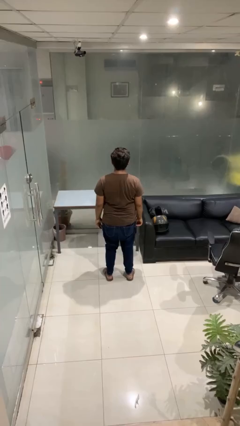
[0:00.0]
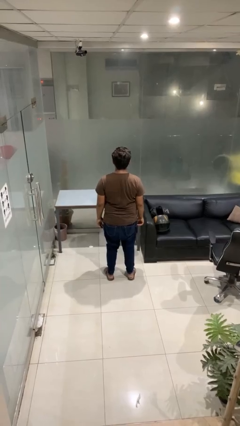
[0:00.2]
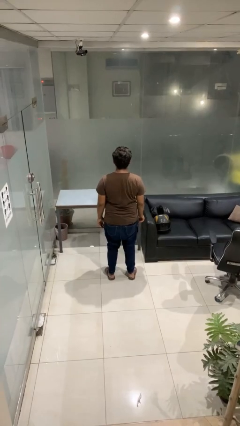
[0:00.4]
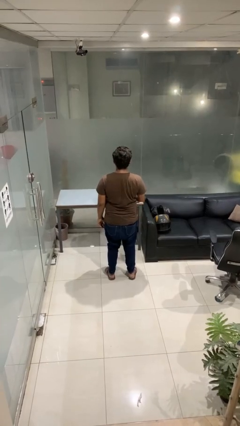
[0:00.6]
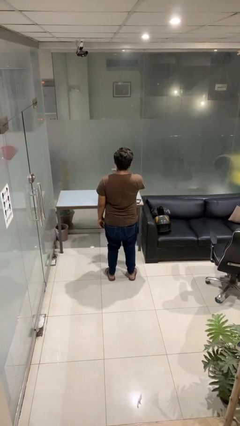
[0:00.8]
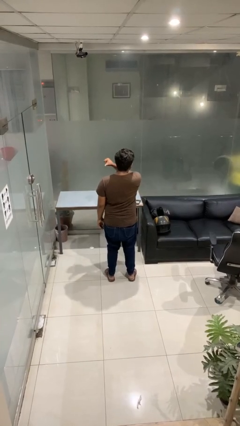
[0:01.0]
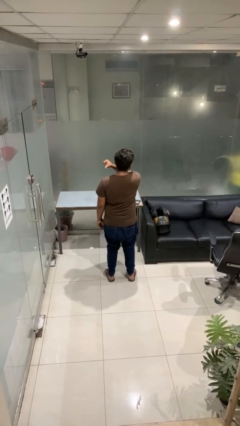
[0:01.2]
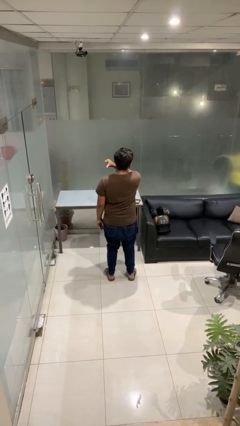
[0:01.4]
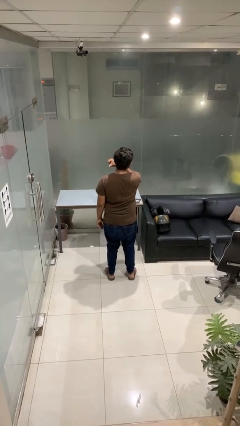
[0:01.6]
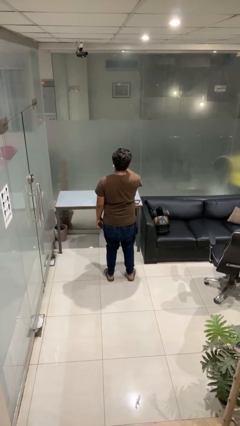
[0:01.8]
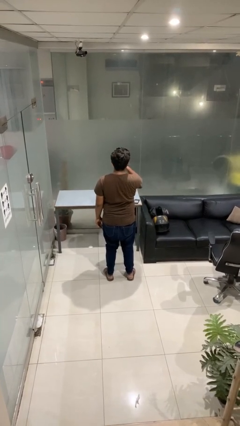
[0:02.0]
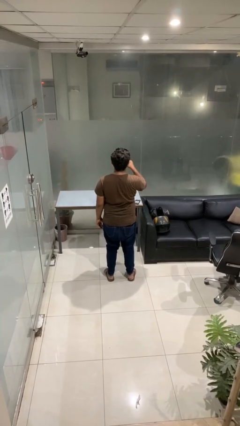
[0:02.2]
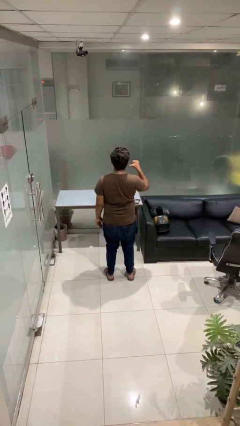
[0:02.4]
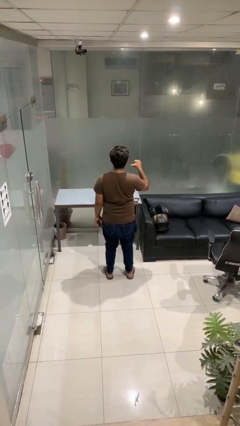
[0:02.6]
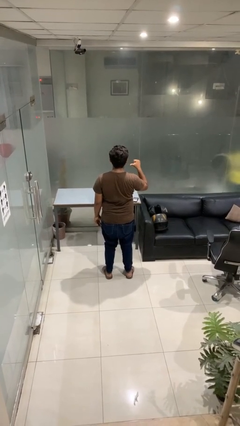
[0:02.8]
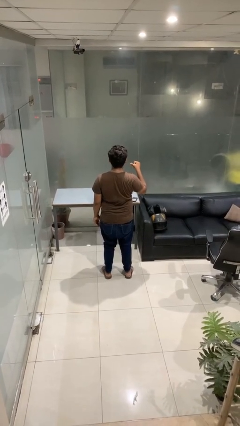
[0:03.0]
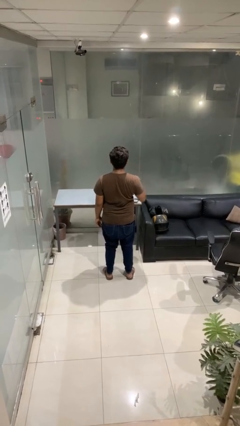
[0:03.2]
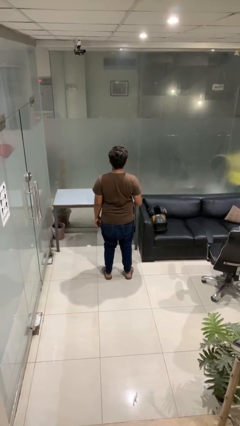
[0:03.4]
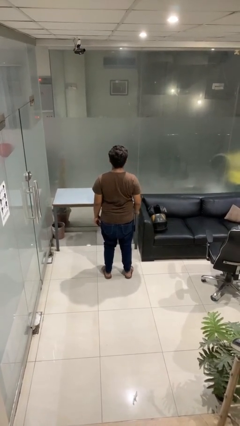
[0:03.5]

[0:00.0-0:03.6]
person gestures cut

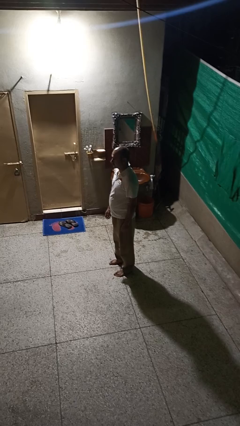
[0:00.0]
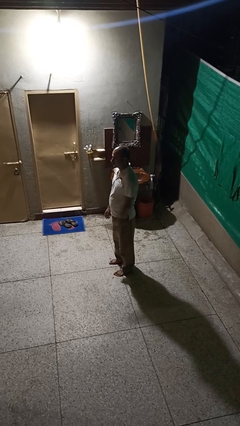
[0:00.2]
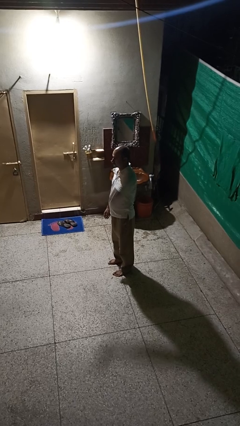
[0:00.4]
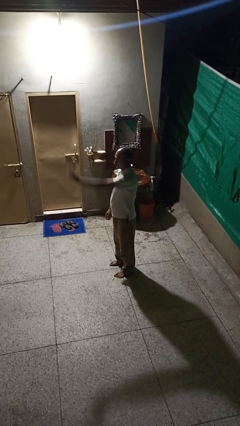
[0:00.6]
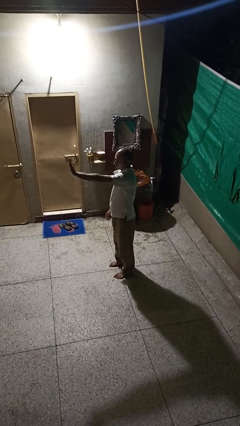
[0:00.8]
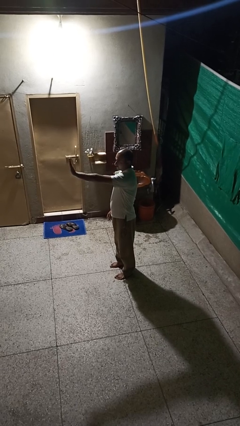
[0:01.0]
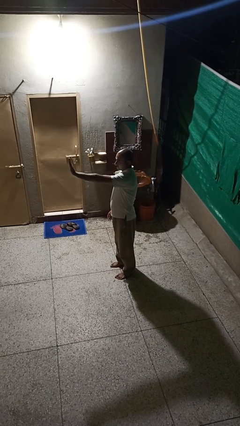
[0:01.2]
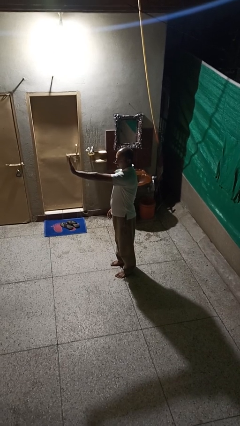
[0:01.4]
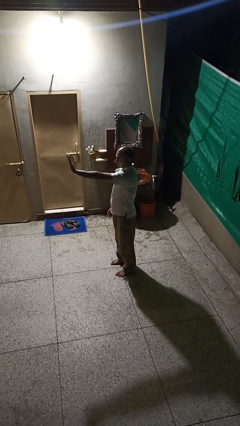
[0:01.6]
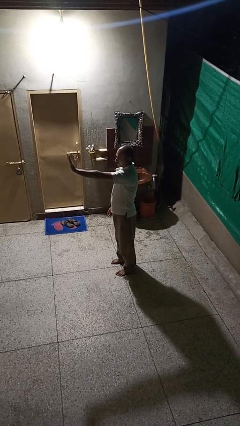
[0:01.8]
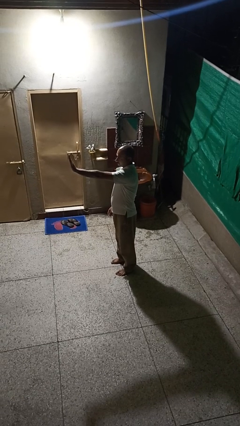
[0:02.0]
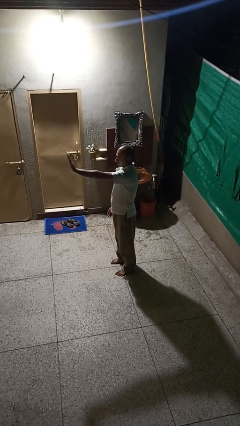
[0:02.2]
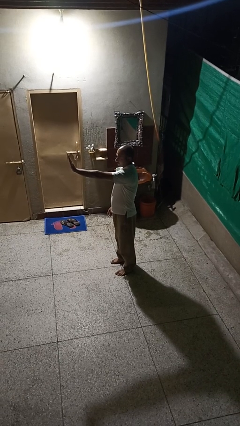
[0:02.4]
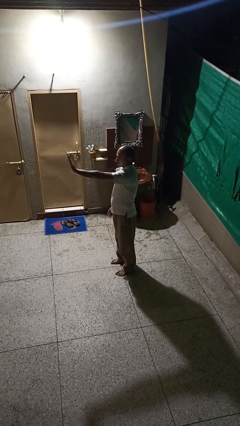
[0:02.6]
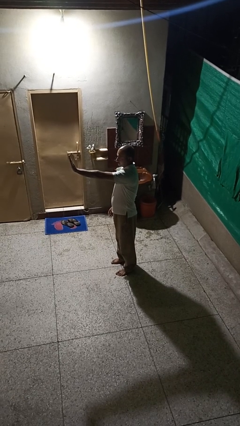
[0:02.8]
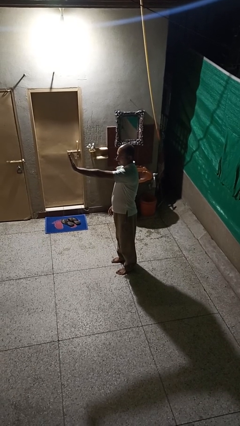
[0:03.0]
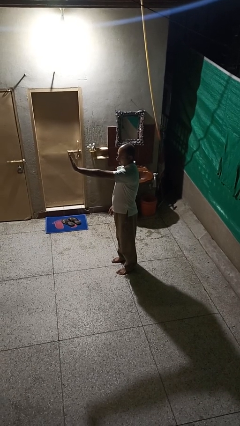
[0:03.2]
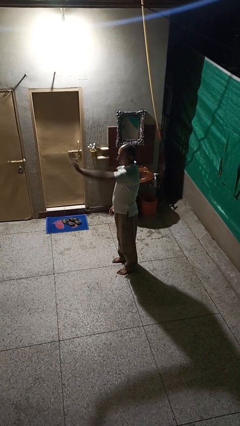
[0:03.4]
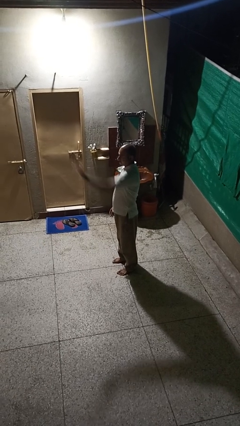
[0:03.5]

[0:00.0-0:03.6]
person gestures stop

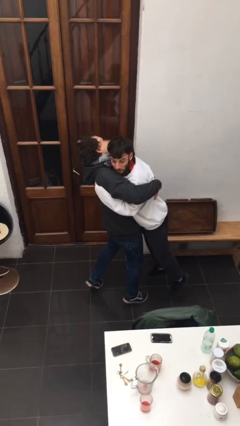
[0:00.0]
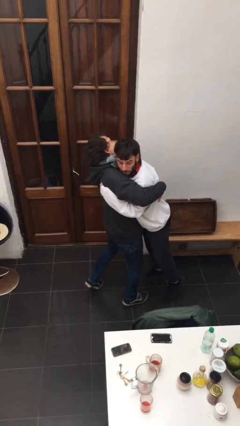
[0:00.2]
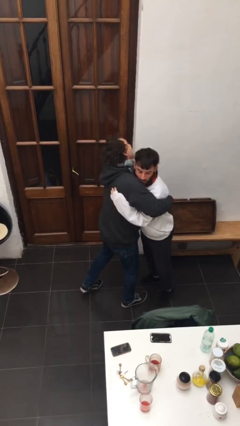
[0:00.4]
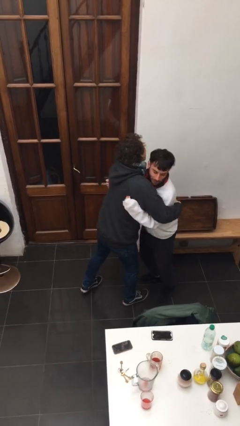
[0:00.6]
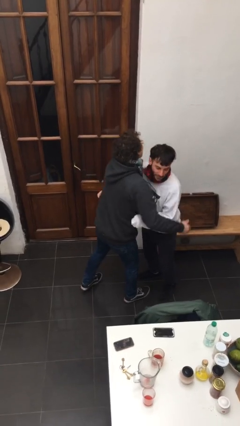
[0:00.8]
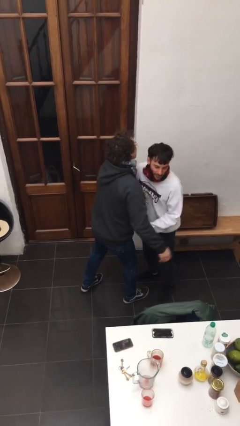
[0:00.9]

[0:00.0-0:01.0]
person puts down person

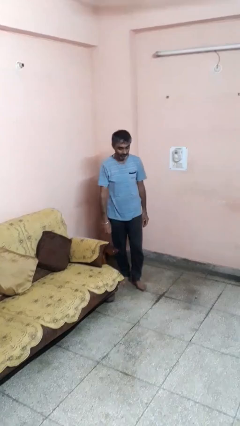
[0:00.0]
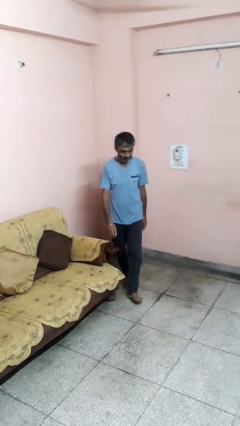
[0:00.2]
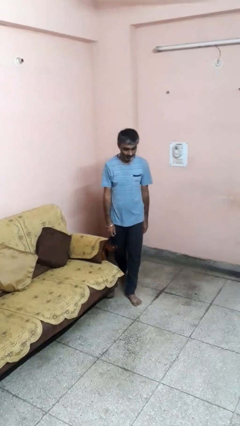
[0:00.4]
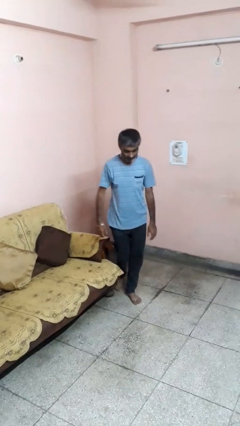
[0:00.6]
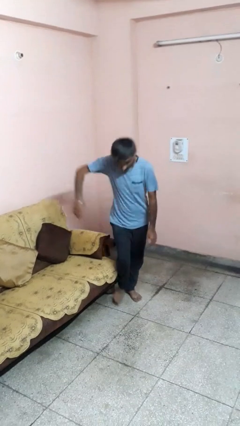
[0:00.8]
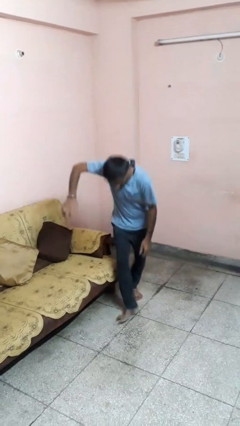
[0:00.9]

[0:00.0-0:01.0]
person trips on object on floor

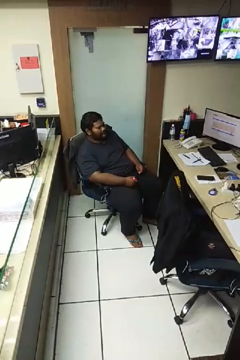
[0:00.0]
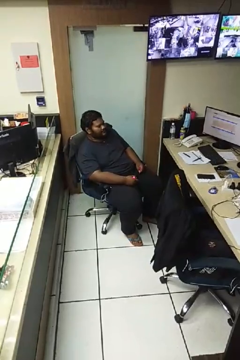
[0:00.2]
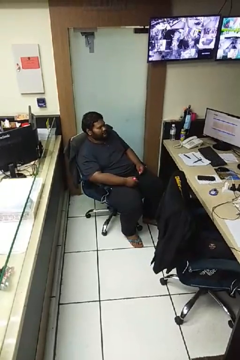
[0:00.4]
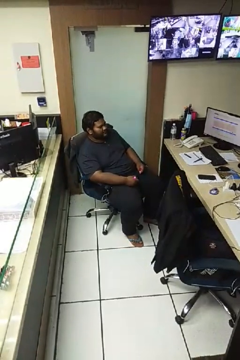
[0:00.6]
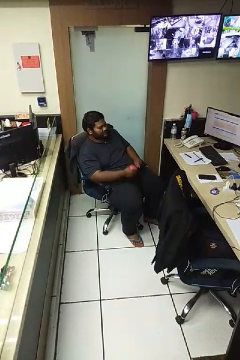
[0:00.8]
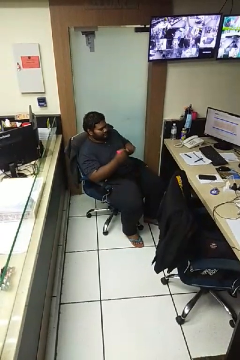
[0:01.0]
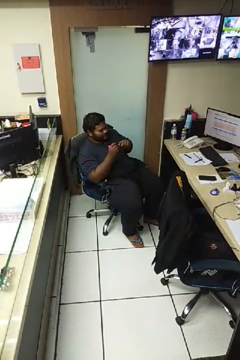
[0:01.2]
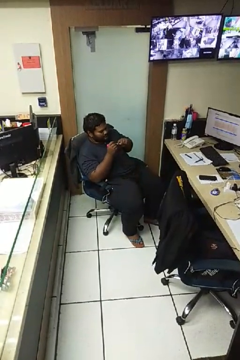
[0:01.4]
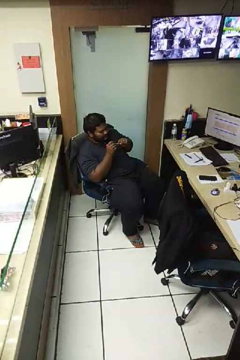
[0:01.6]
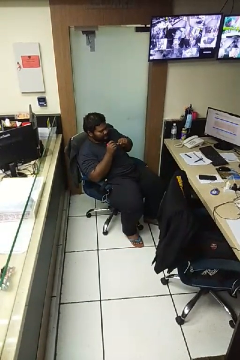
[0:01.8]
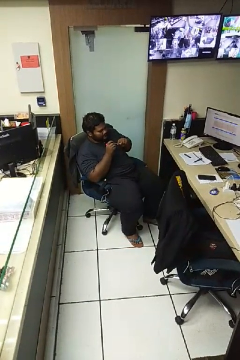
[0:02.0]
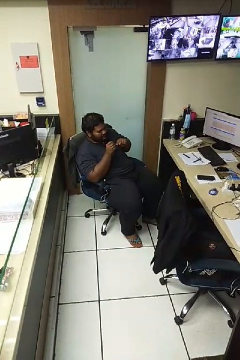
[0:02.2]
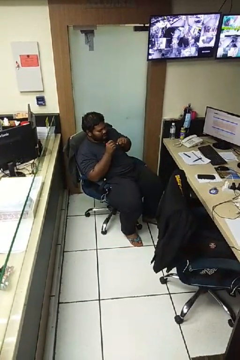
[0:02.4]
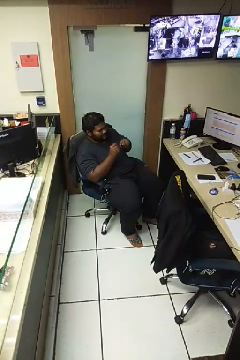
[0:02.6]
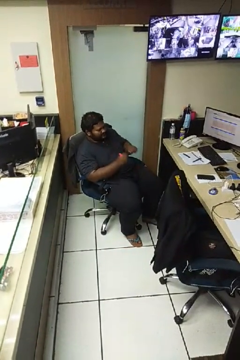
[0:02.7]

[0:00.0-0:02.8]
person paints fingernails

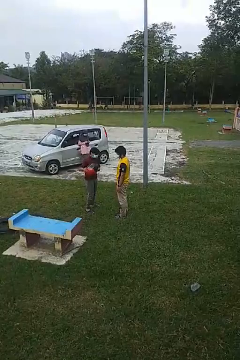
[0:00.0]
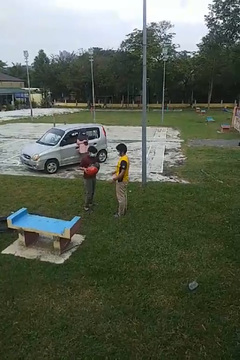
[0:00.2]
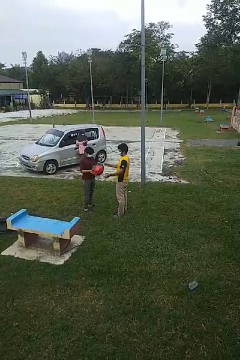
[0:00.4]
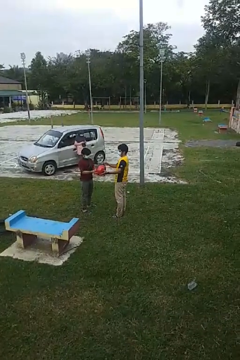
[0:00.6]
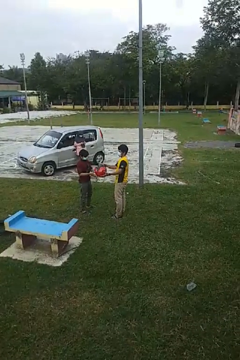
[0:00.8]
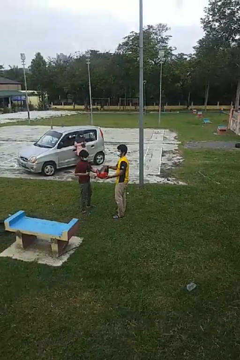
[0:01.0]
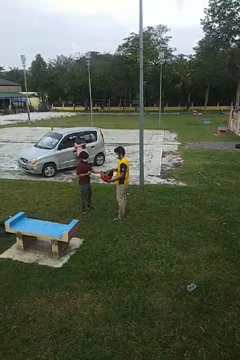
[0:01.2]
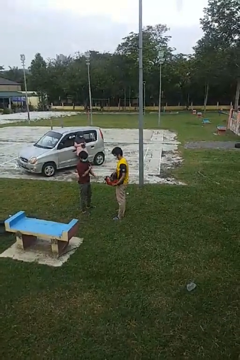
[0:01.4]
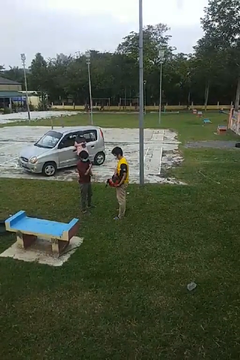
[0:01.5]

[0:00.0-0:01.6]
person transfers object to person

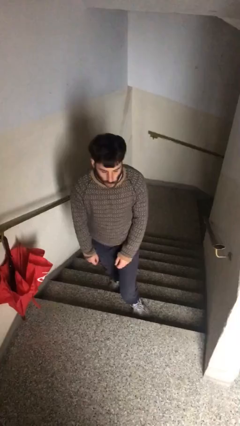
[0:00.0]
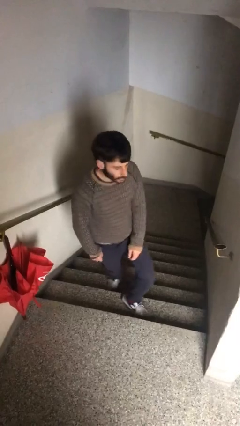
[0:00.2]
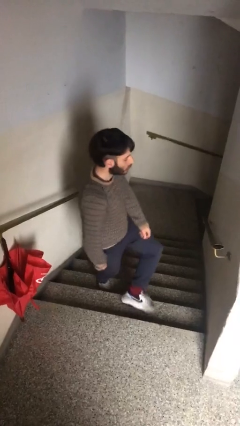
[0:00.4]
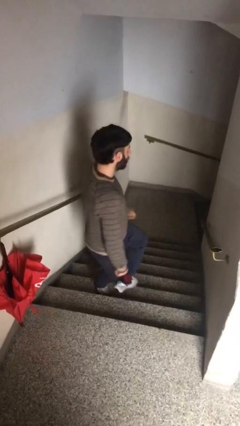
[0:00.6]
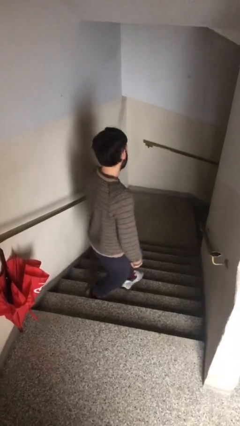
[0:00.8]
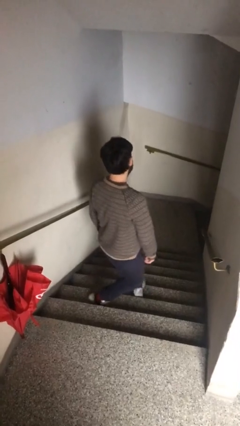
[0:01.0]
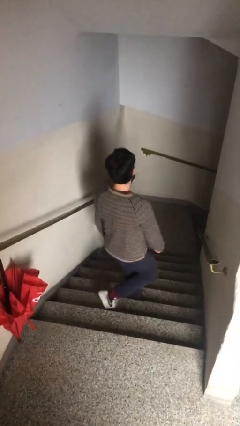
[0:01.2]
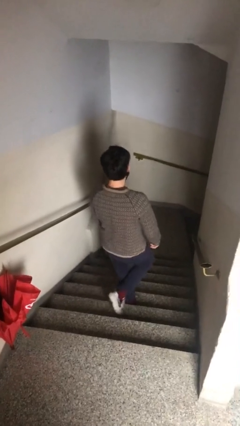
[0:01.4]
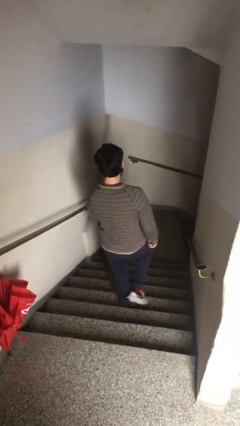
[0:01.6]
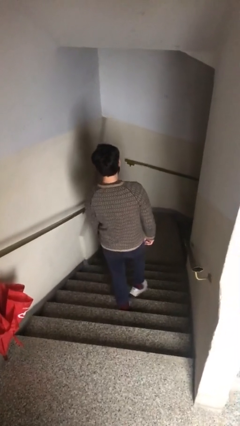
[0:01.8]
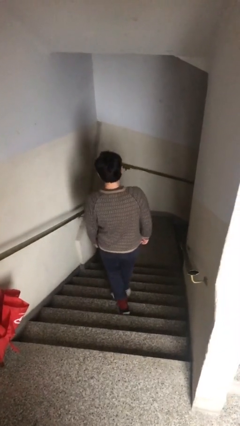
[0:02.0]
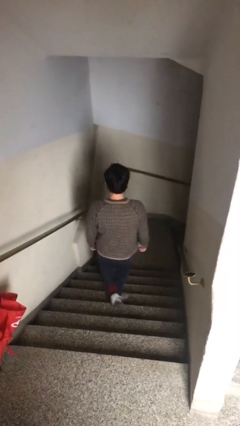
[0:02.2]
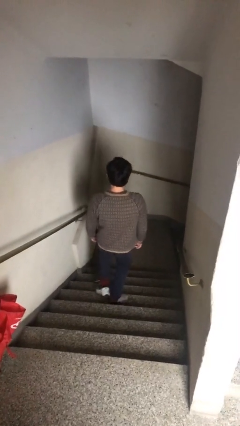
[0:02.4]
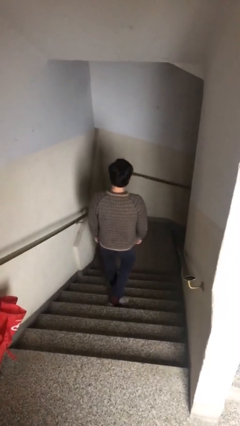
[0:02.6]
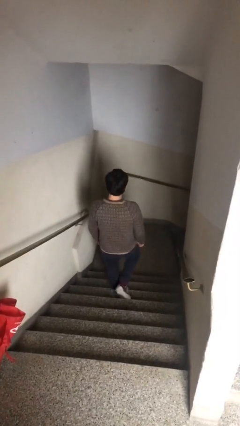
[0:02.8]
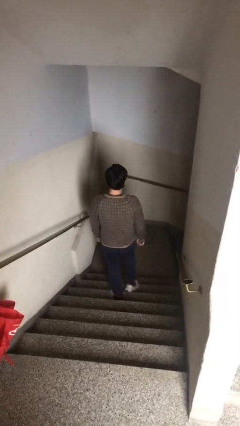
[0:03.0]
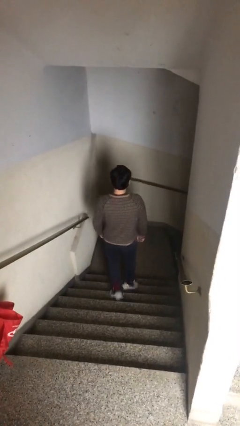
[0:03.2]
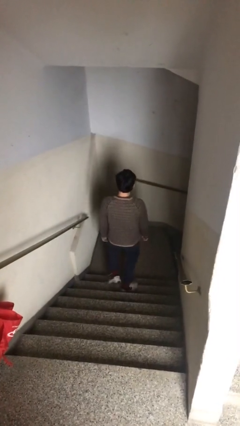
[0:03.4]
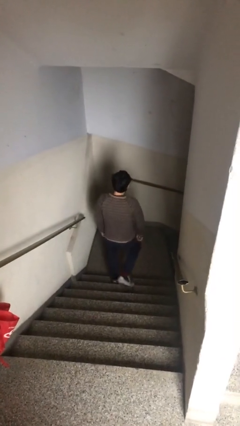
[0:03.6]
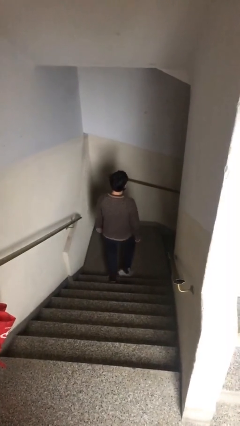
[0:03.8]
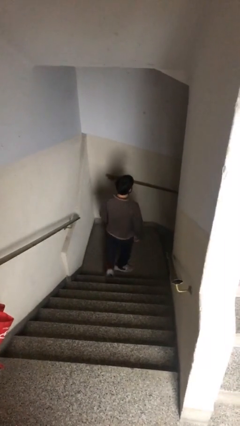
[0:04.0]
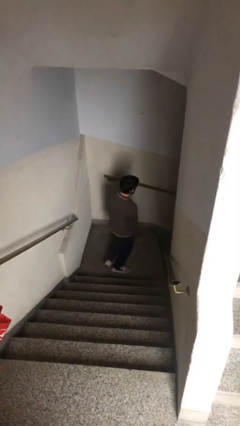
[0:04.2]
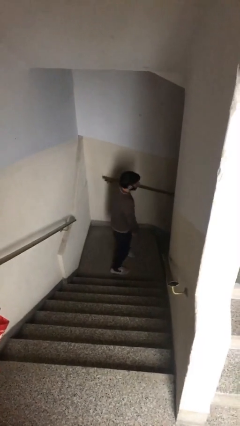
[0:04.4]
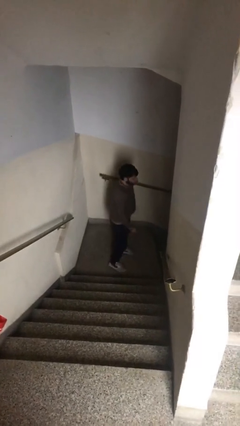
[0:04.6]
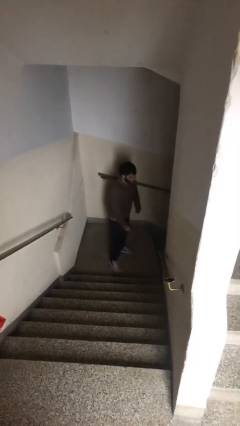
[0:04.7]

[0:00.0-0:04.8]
person climbs down stairs
